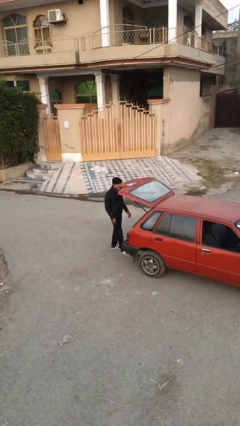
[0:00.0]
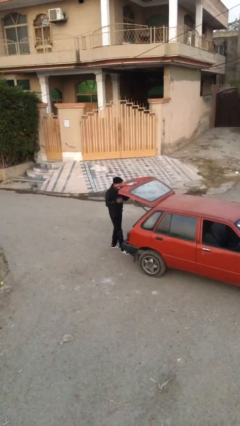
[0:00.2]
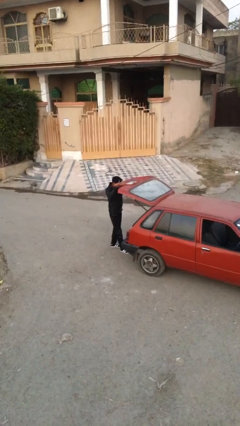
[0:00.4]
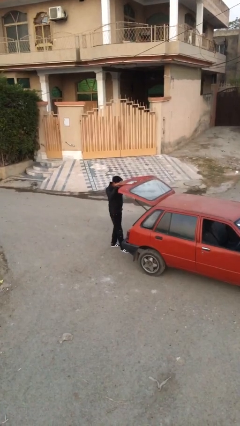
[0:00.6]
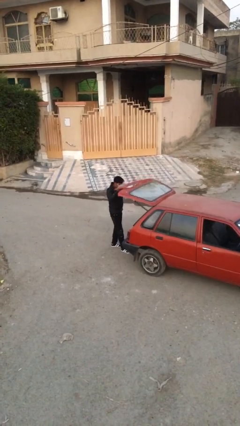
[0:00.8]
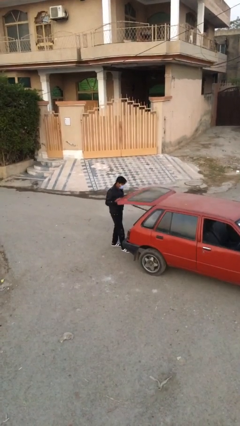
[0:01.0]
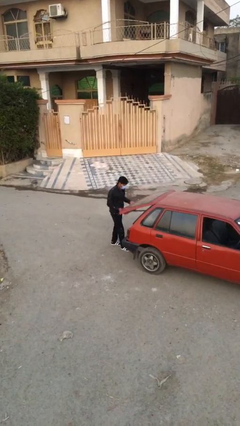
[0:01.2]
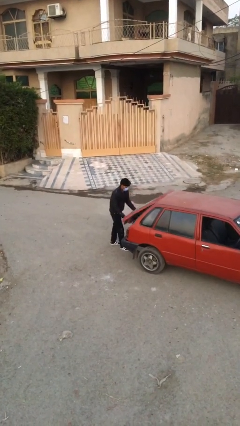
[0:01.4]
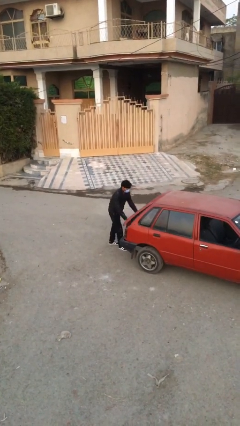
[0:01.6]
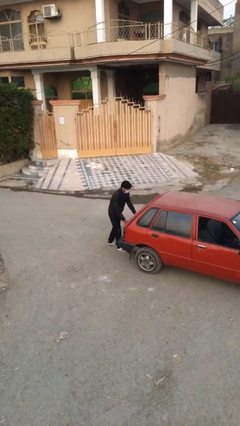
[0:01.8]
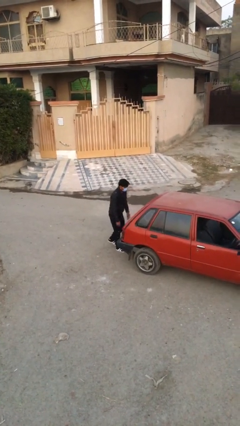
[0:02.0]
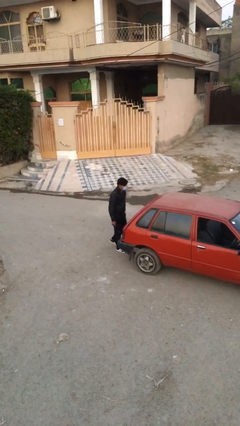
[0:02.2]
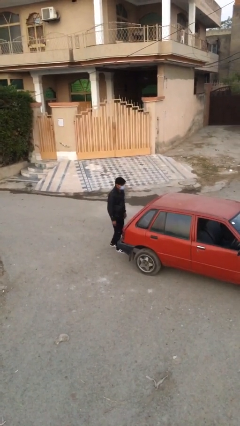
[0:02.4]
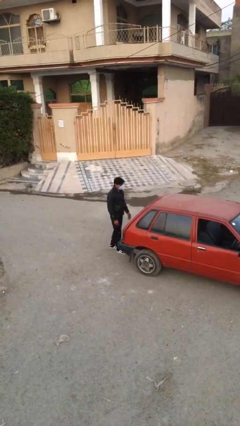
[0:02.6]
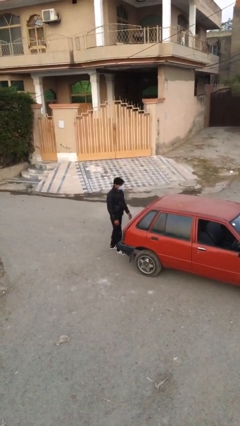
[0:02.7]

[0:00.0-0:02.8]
person closes car trunk

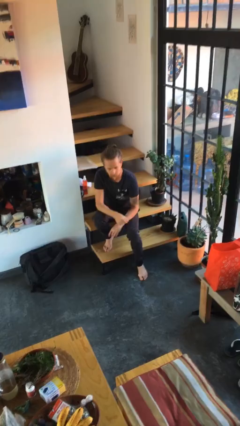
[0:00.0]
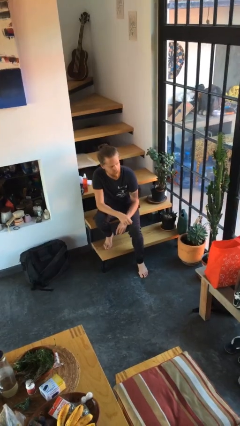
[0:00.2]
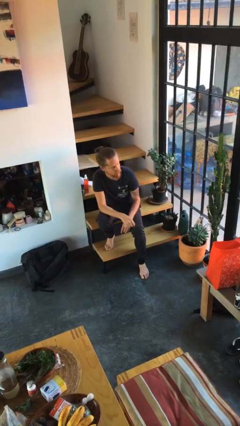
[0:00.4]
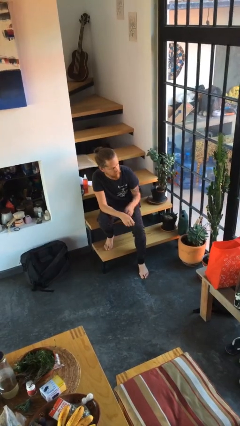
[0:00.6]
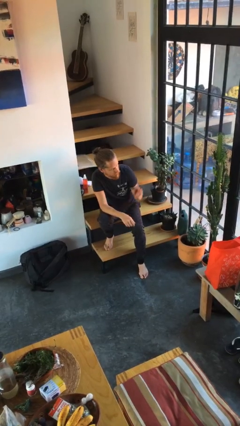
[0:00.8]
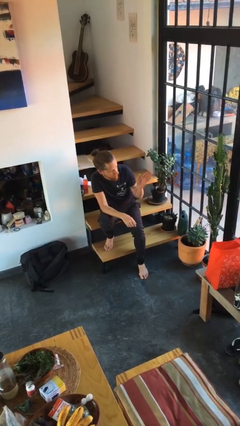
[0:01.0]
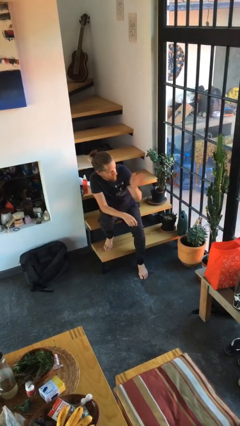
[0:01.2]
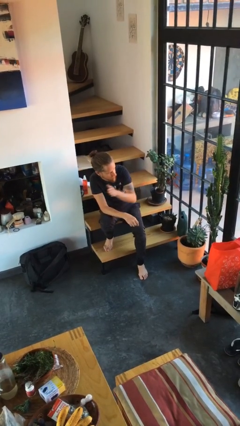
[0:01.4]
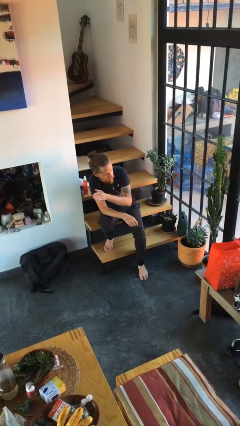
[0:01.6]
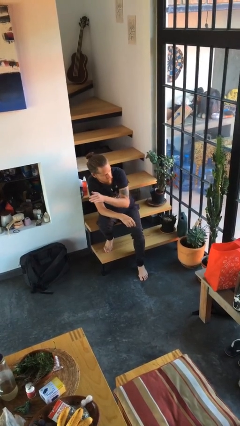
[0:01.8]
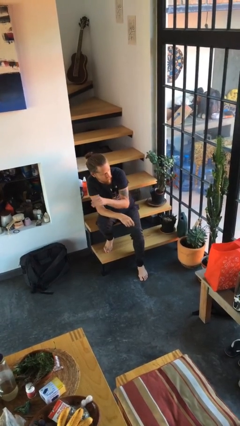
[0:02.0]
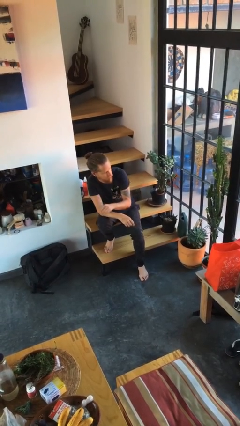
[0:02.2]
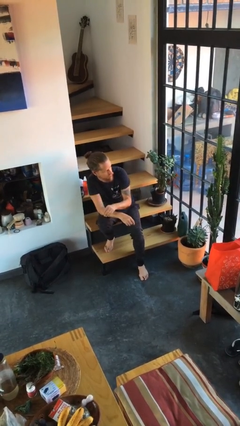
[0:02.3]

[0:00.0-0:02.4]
person gestures swipe left

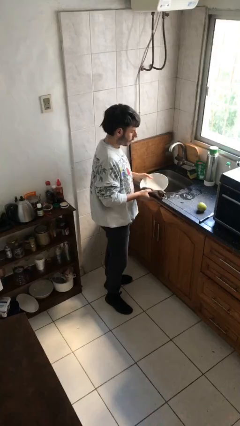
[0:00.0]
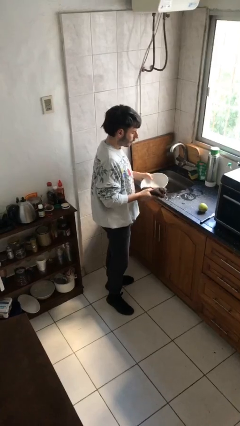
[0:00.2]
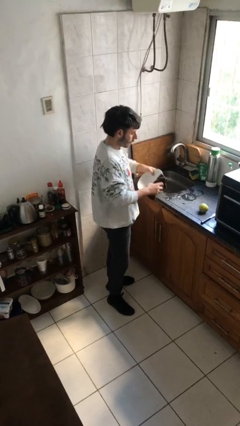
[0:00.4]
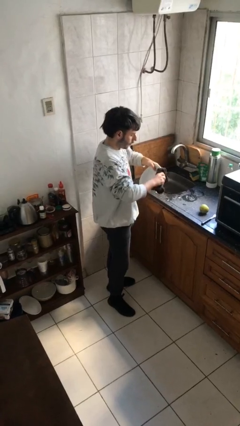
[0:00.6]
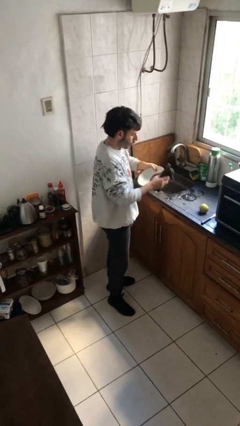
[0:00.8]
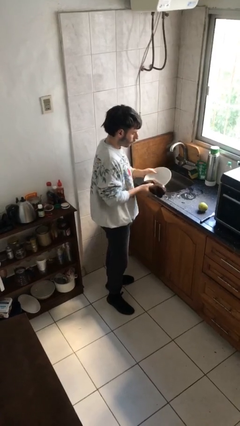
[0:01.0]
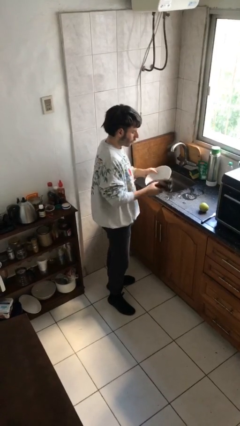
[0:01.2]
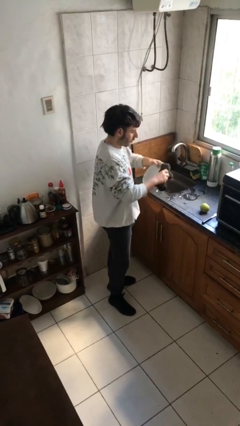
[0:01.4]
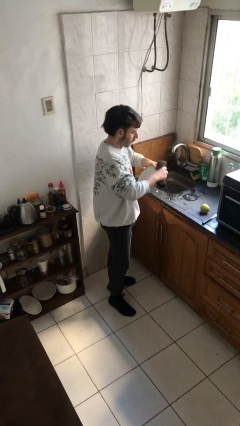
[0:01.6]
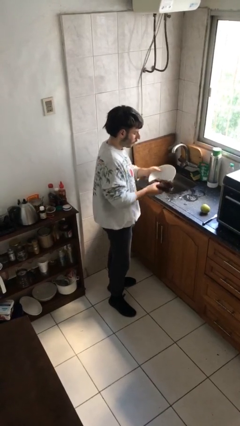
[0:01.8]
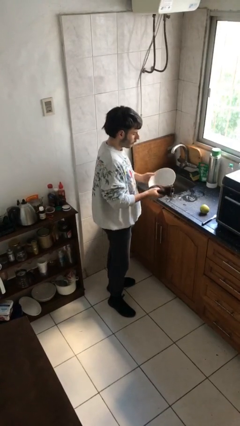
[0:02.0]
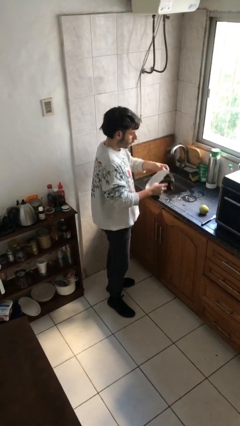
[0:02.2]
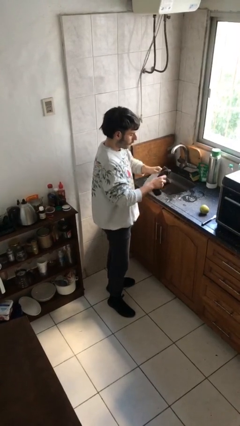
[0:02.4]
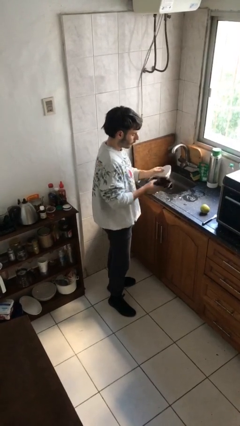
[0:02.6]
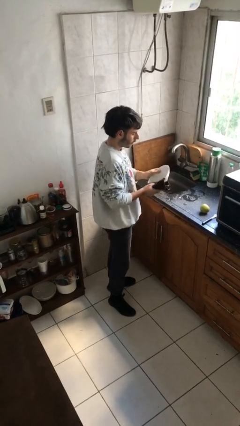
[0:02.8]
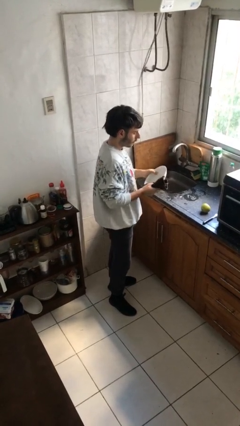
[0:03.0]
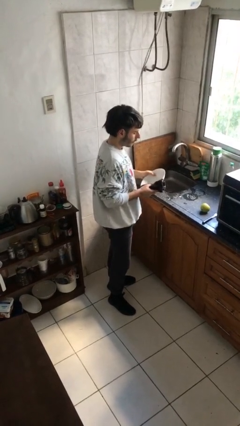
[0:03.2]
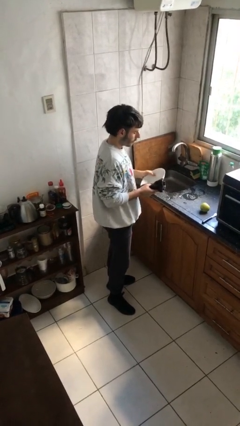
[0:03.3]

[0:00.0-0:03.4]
person dries dish

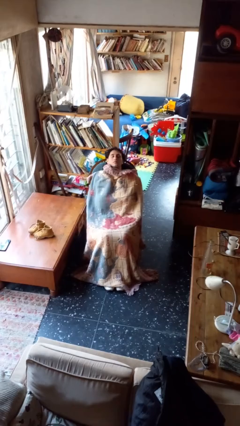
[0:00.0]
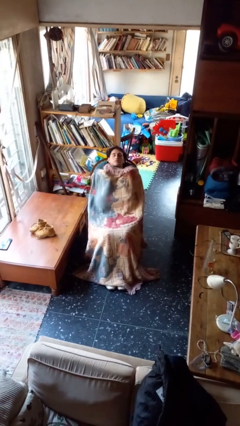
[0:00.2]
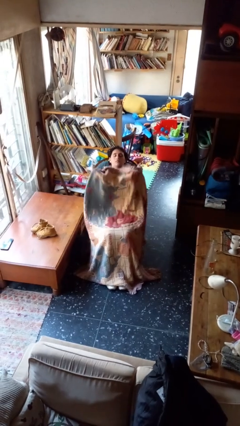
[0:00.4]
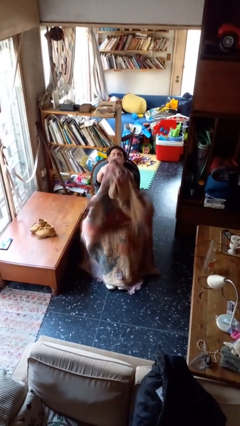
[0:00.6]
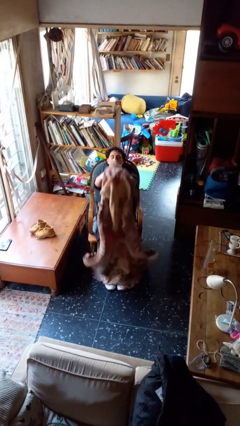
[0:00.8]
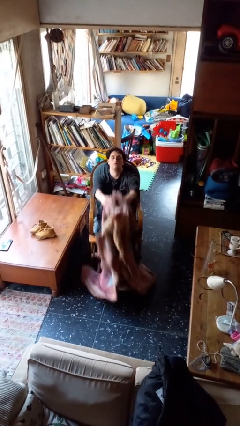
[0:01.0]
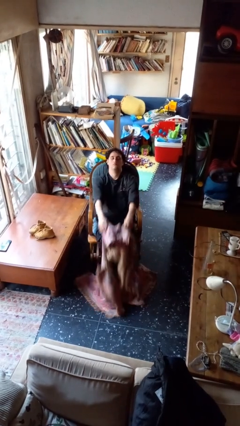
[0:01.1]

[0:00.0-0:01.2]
person uncovers with blanket

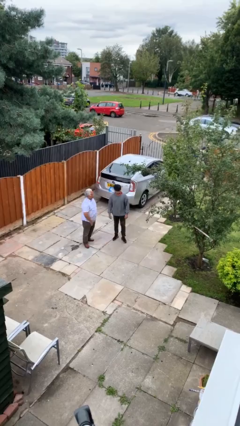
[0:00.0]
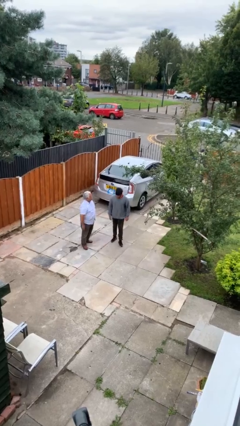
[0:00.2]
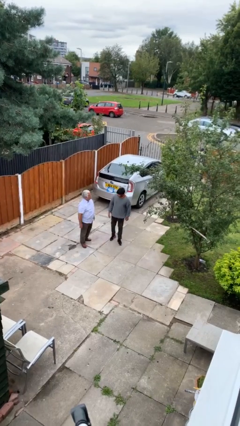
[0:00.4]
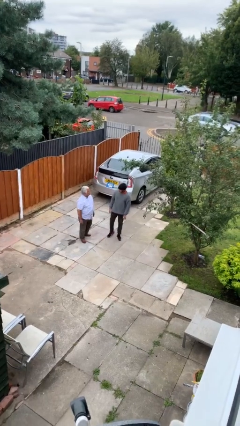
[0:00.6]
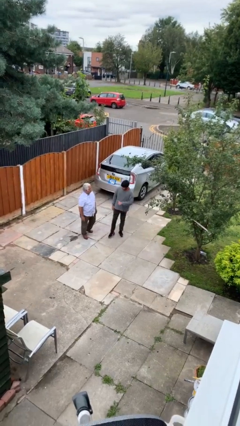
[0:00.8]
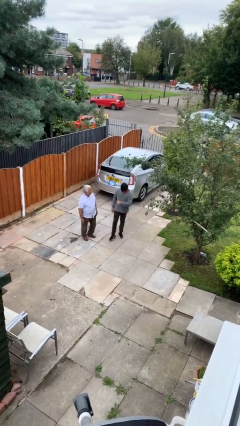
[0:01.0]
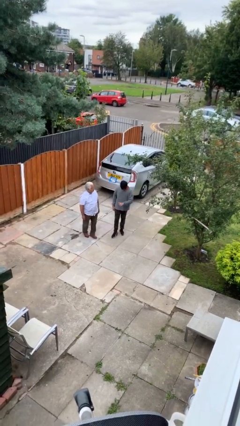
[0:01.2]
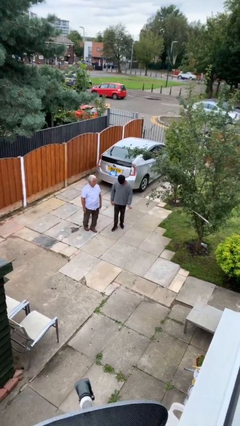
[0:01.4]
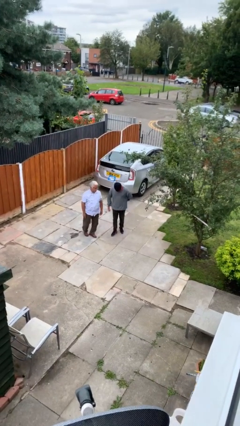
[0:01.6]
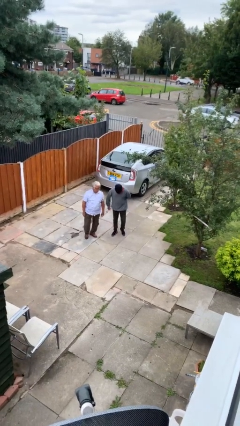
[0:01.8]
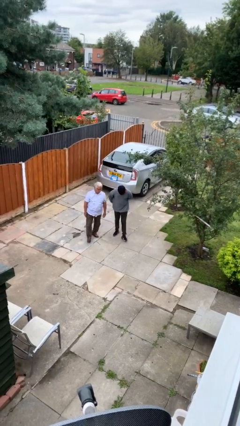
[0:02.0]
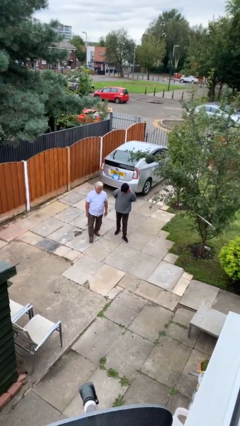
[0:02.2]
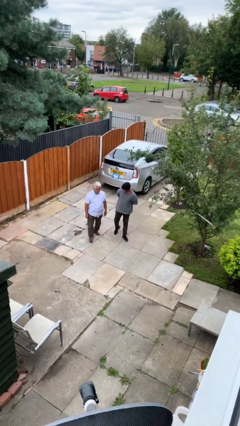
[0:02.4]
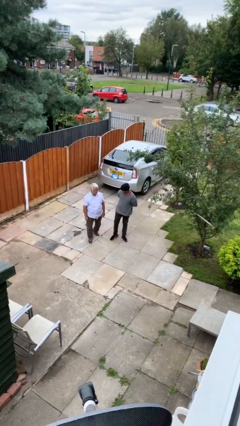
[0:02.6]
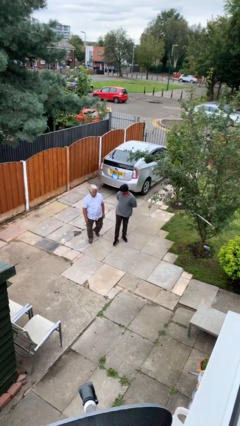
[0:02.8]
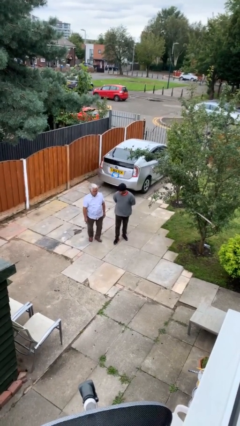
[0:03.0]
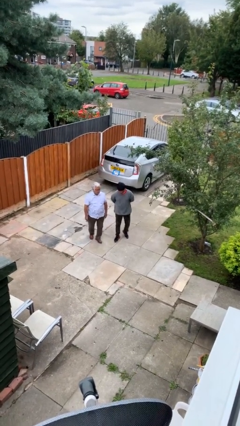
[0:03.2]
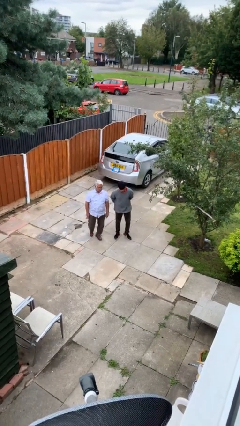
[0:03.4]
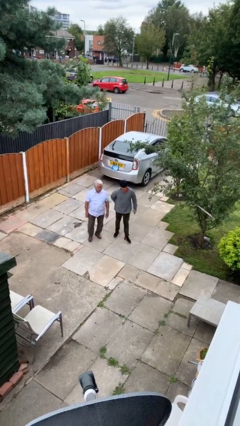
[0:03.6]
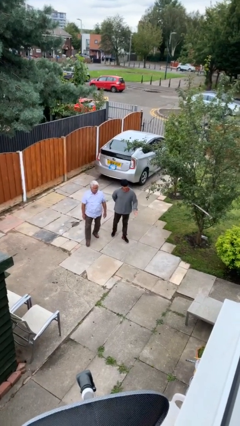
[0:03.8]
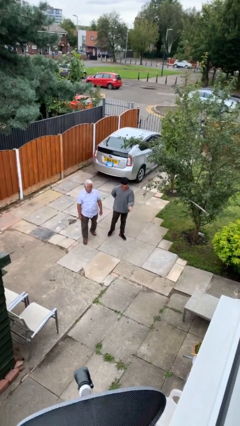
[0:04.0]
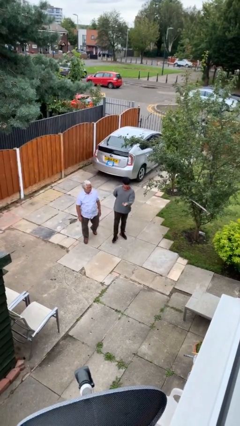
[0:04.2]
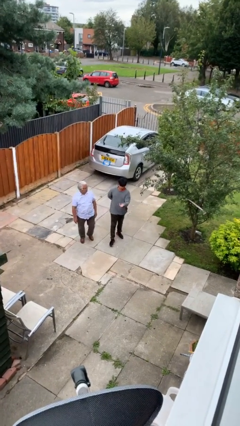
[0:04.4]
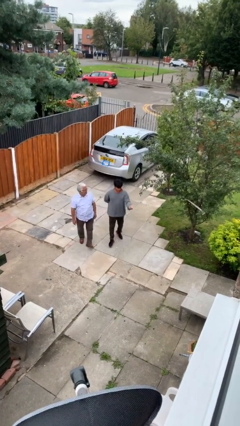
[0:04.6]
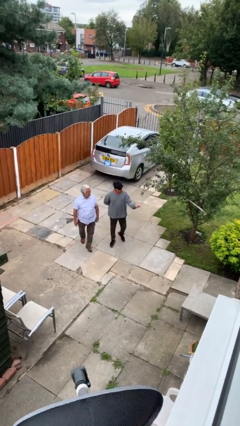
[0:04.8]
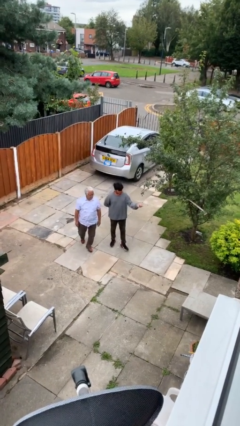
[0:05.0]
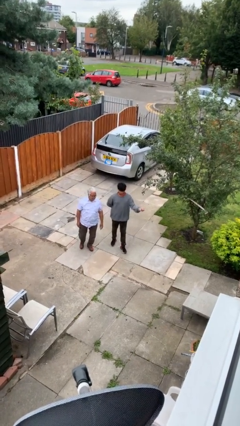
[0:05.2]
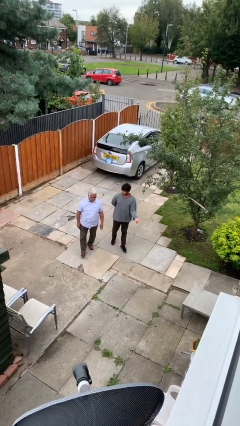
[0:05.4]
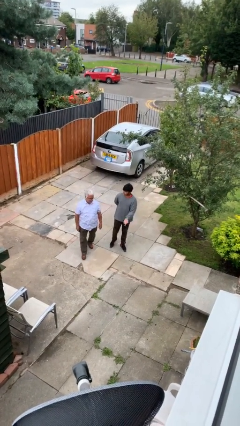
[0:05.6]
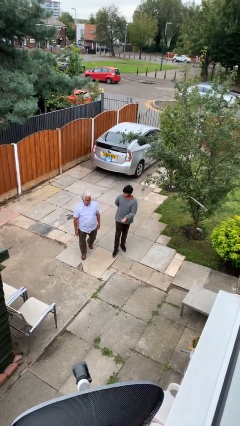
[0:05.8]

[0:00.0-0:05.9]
person talks to person

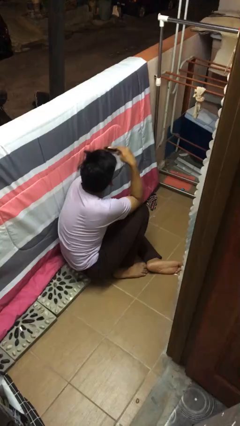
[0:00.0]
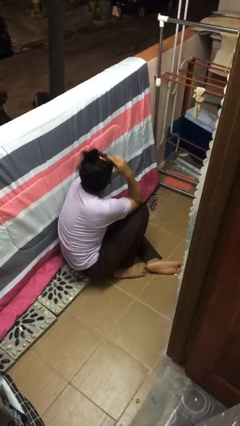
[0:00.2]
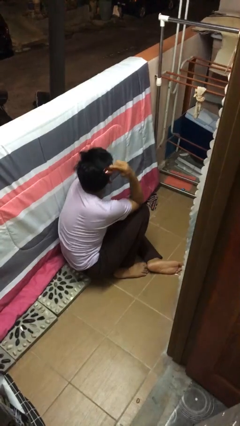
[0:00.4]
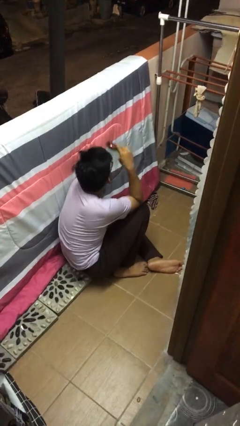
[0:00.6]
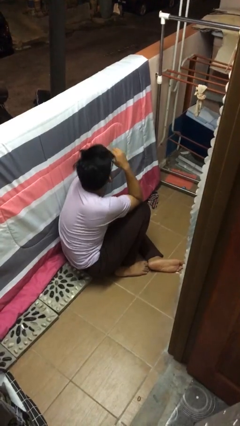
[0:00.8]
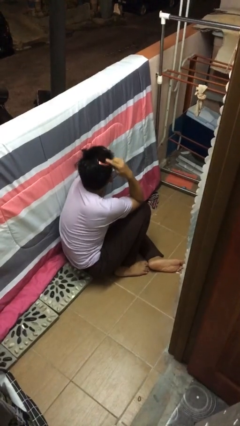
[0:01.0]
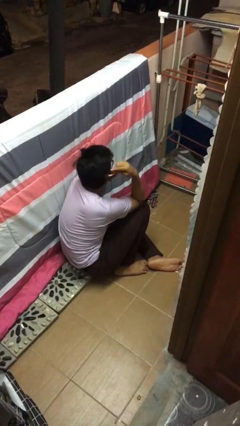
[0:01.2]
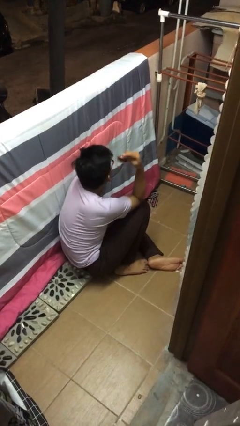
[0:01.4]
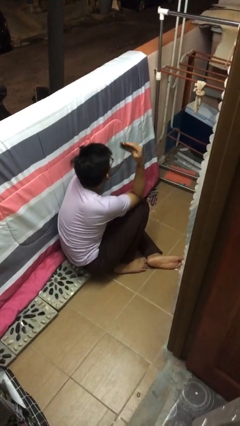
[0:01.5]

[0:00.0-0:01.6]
person brushes hair
